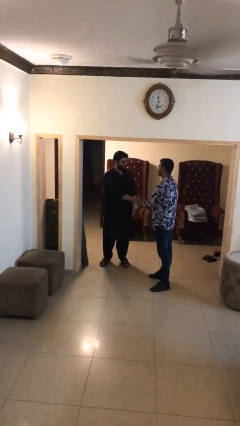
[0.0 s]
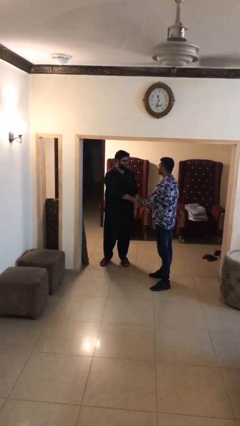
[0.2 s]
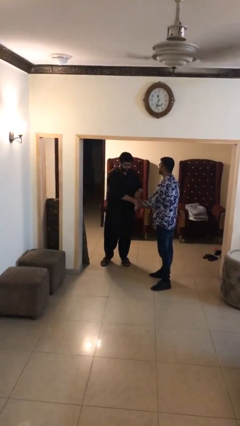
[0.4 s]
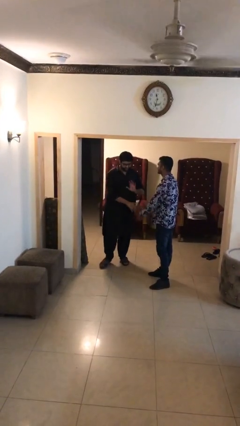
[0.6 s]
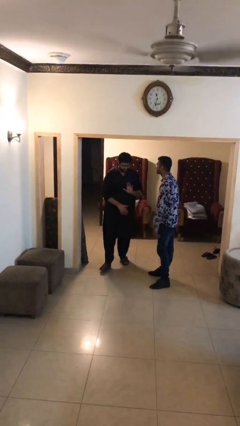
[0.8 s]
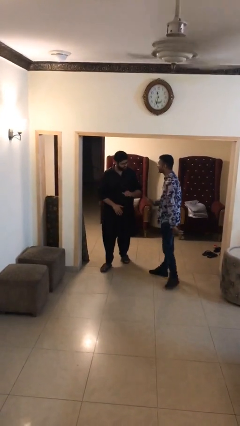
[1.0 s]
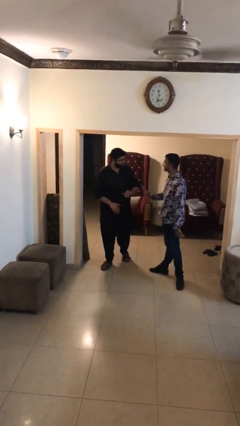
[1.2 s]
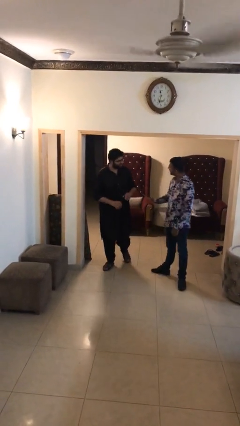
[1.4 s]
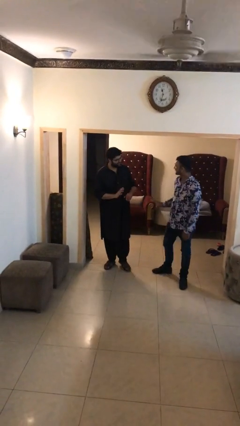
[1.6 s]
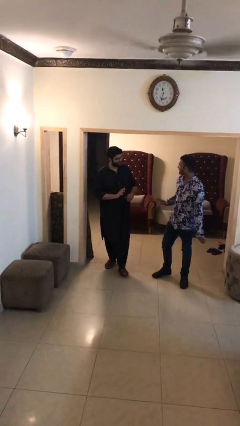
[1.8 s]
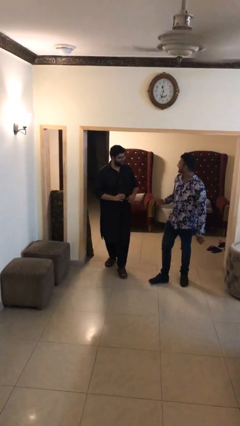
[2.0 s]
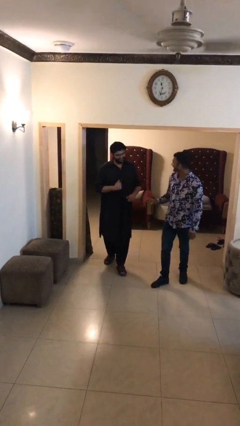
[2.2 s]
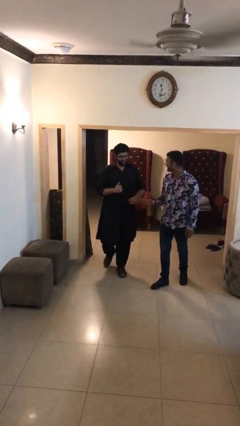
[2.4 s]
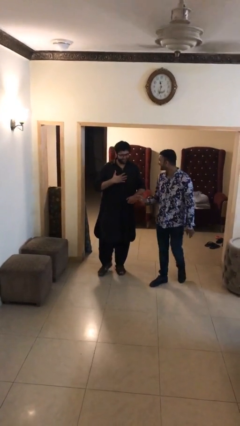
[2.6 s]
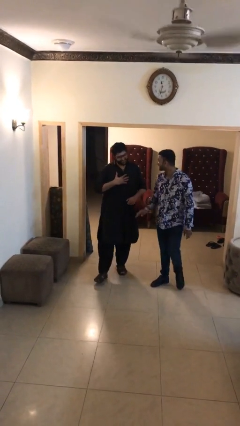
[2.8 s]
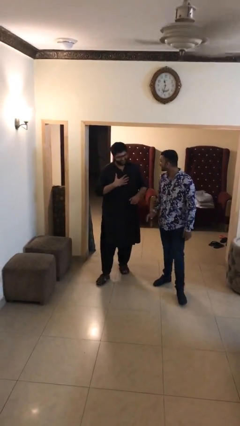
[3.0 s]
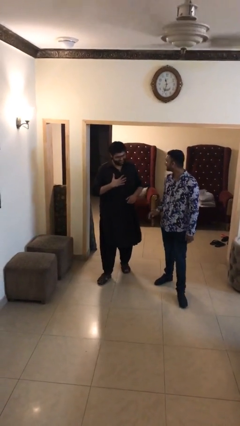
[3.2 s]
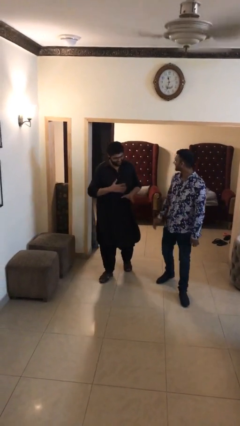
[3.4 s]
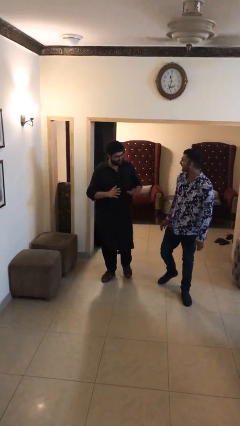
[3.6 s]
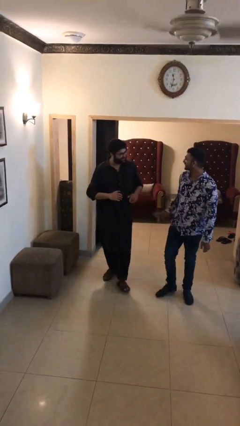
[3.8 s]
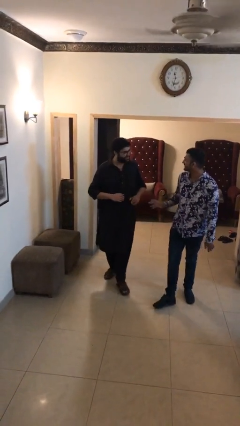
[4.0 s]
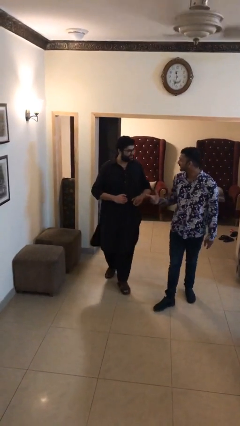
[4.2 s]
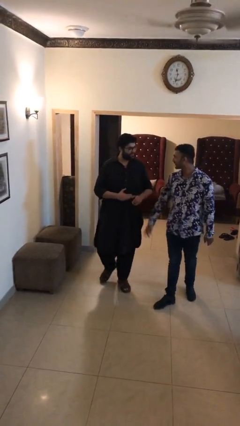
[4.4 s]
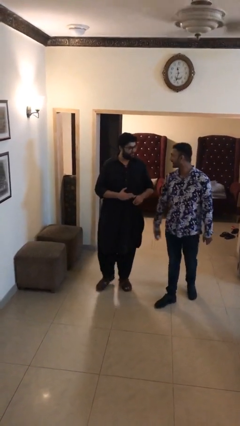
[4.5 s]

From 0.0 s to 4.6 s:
person talks to person

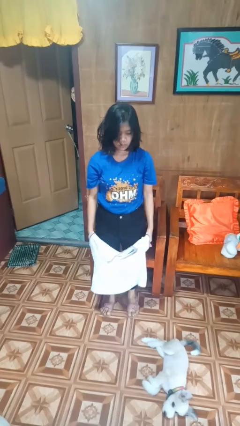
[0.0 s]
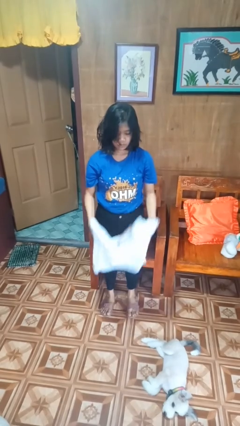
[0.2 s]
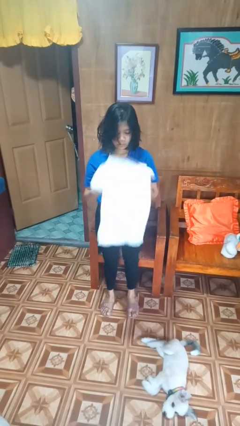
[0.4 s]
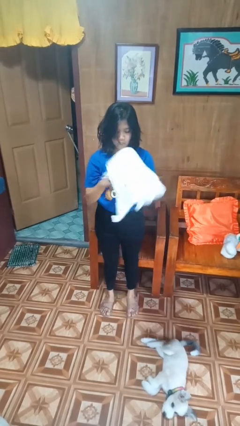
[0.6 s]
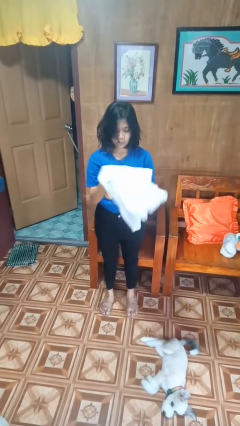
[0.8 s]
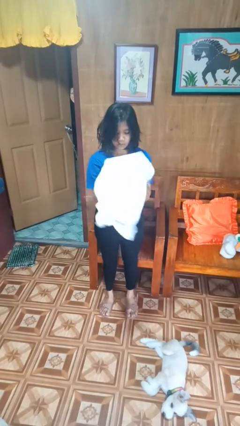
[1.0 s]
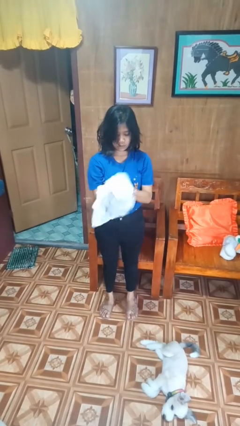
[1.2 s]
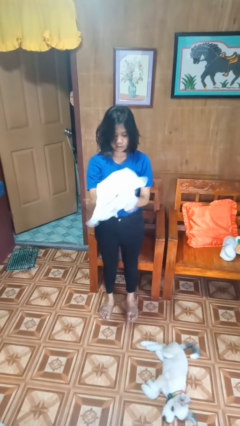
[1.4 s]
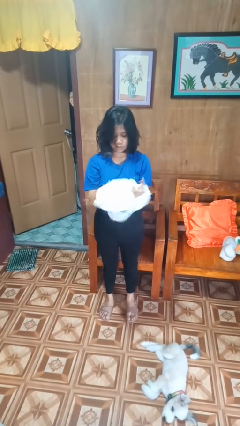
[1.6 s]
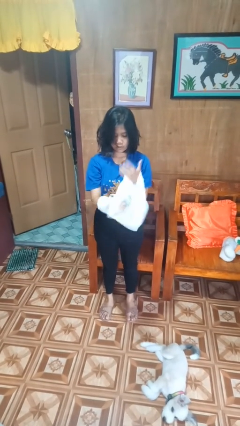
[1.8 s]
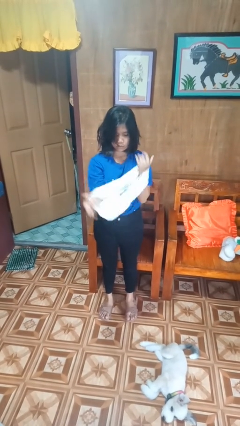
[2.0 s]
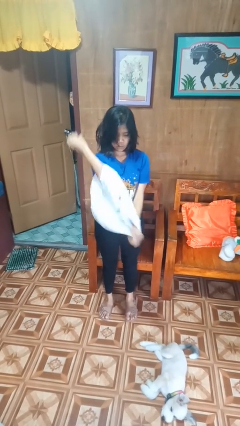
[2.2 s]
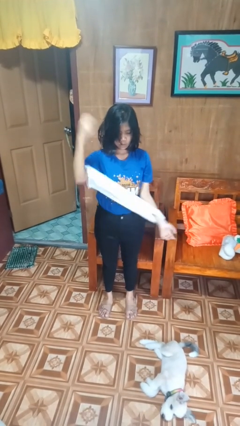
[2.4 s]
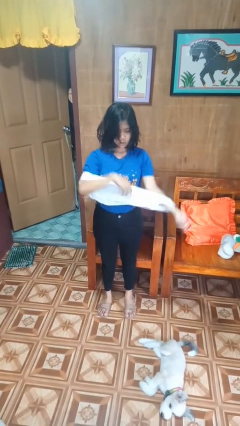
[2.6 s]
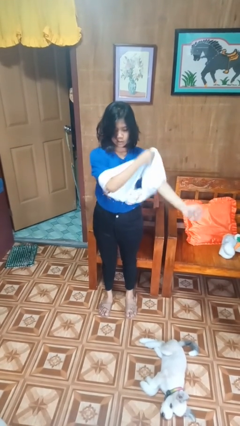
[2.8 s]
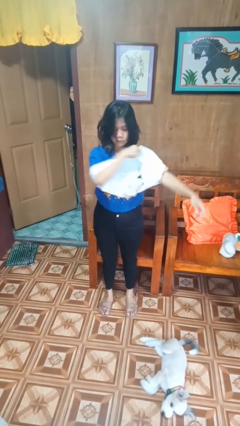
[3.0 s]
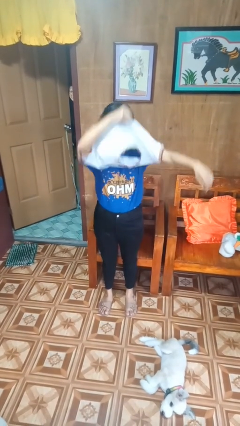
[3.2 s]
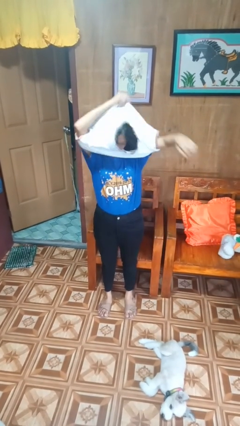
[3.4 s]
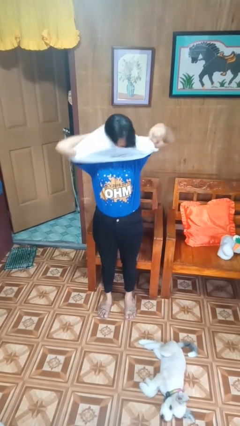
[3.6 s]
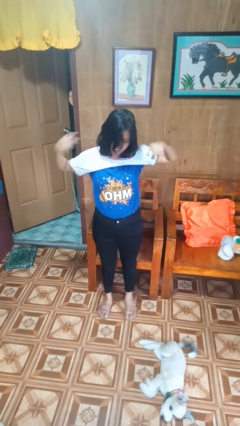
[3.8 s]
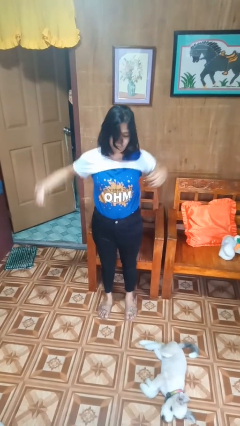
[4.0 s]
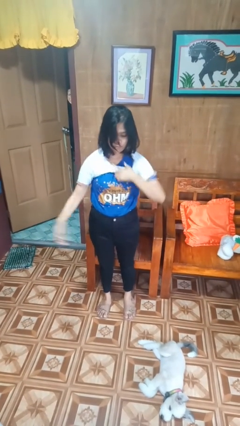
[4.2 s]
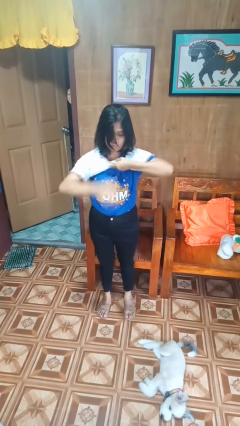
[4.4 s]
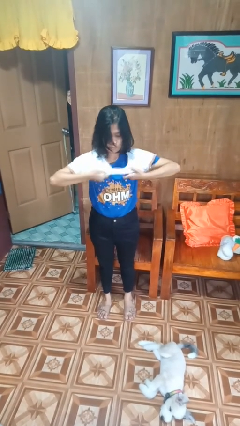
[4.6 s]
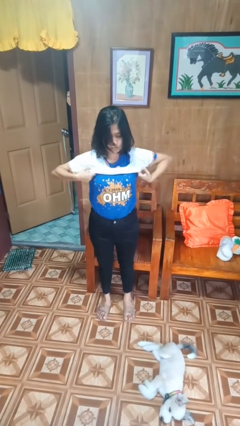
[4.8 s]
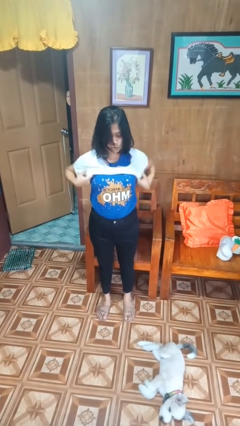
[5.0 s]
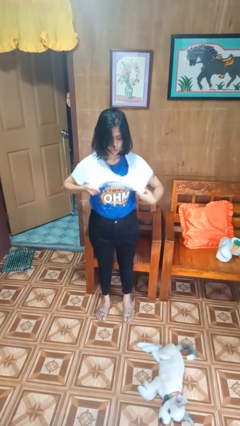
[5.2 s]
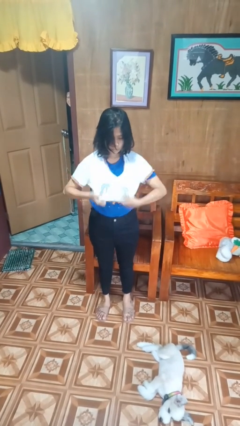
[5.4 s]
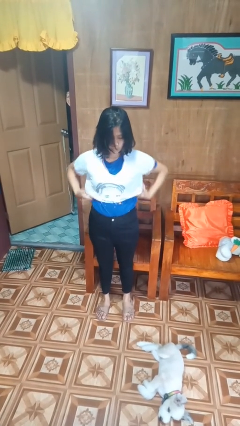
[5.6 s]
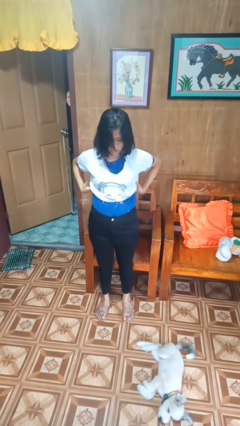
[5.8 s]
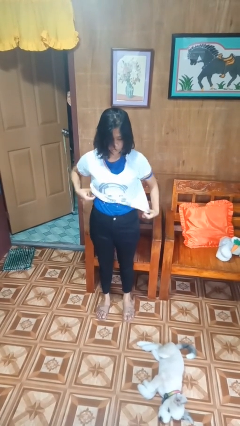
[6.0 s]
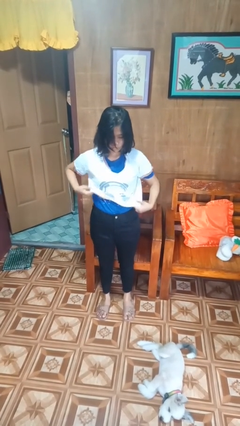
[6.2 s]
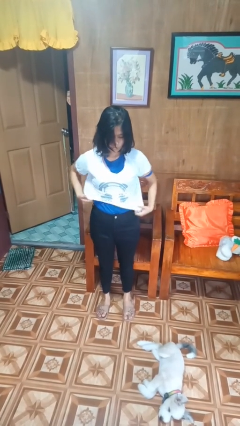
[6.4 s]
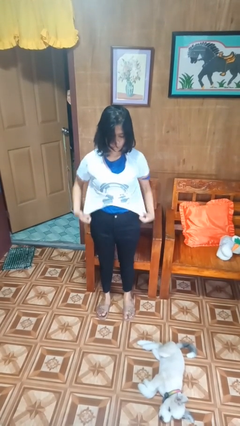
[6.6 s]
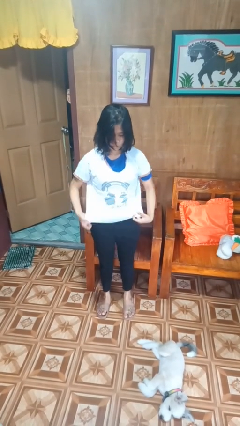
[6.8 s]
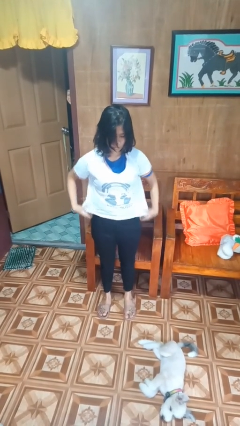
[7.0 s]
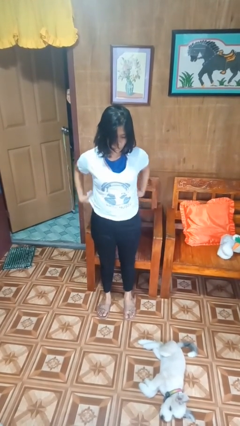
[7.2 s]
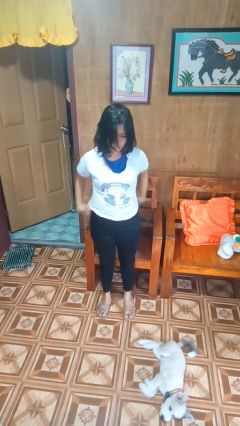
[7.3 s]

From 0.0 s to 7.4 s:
person puts on shirt

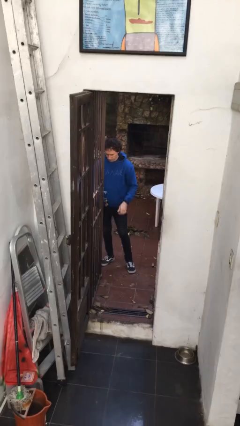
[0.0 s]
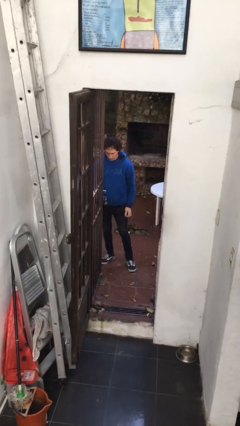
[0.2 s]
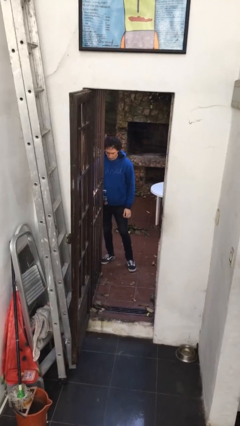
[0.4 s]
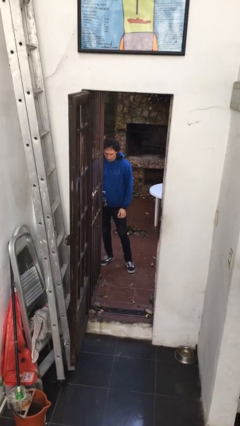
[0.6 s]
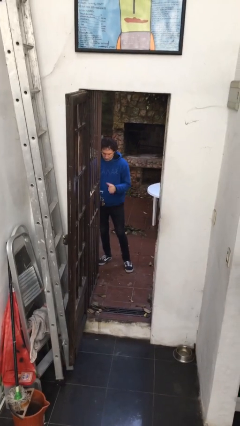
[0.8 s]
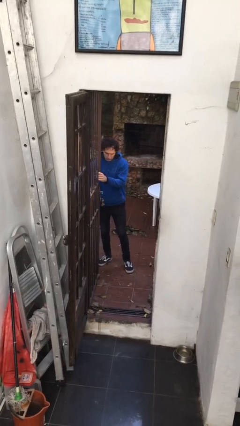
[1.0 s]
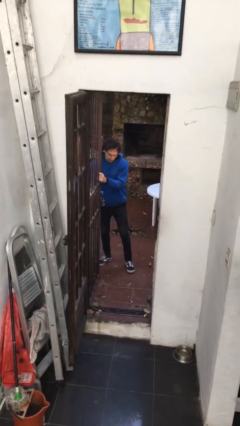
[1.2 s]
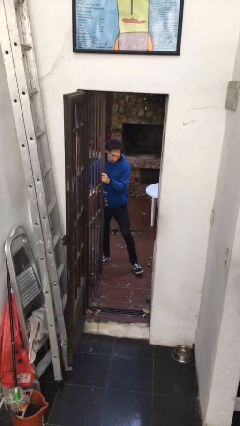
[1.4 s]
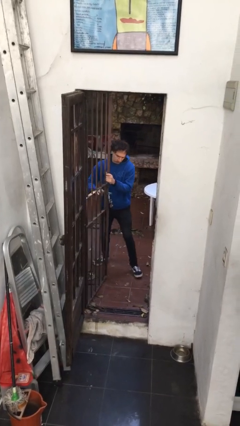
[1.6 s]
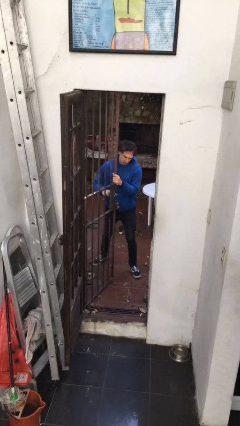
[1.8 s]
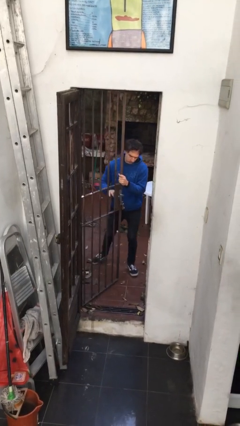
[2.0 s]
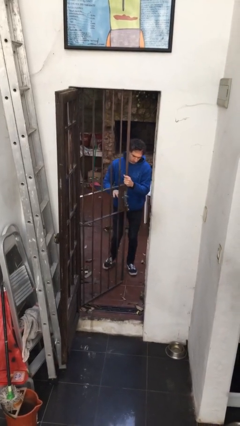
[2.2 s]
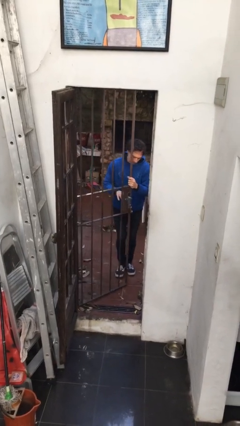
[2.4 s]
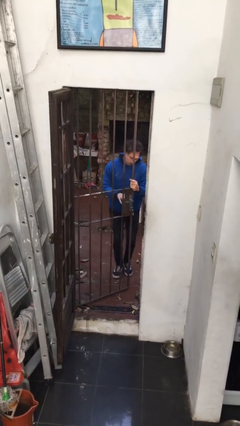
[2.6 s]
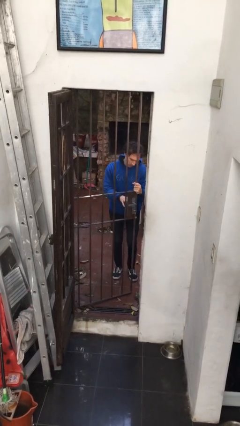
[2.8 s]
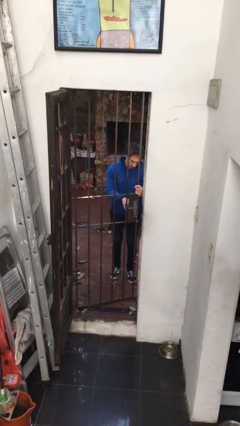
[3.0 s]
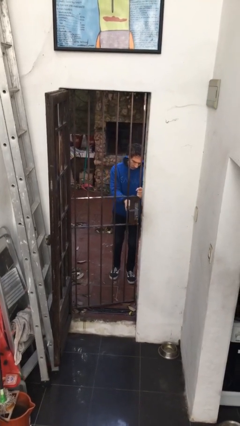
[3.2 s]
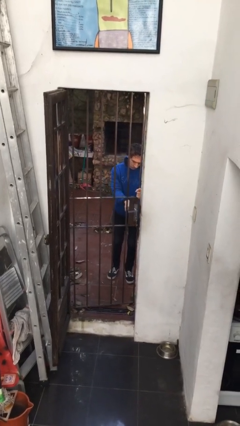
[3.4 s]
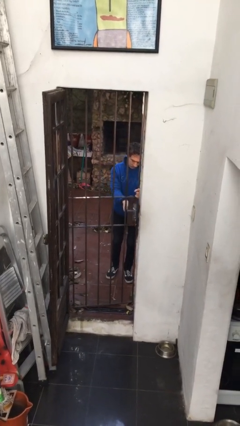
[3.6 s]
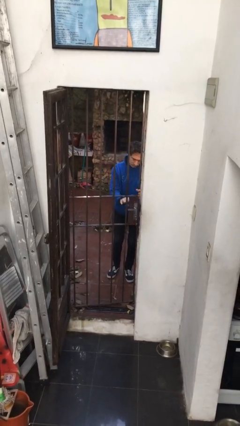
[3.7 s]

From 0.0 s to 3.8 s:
person closes gate

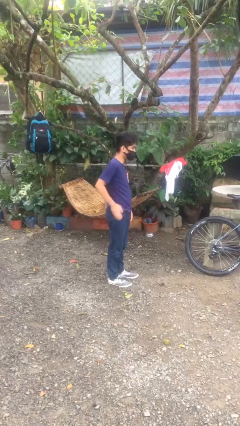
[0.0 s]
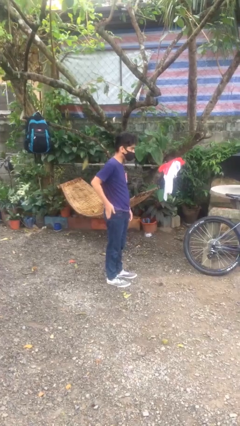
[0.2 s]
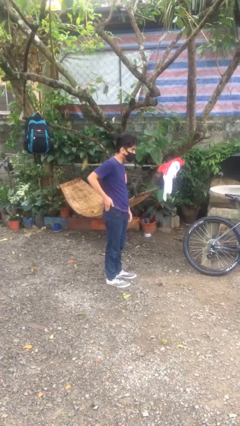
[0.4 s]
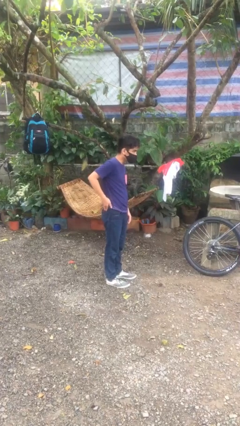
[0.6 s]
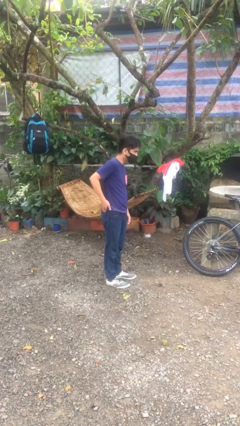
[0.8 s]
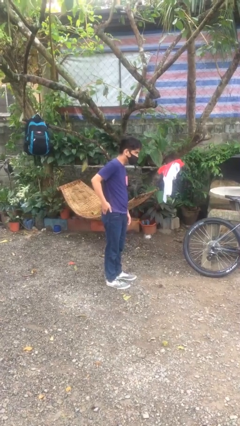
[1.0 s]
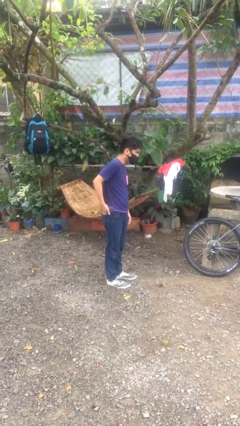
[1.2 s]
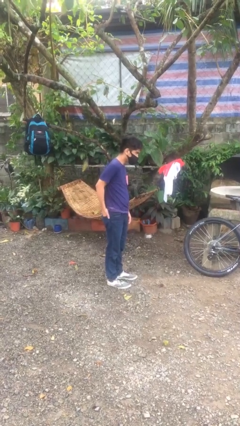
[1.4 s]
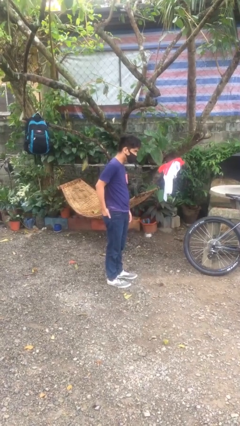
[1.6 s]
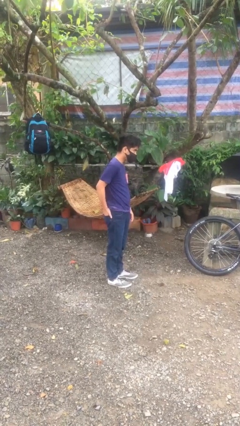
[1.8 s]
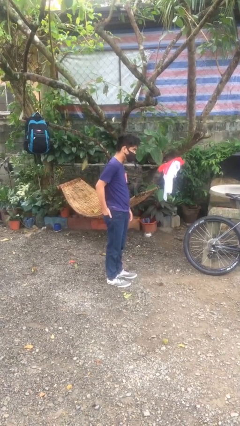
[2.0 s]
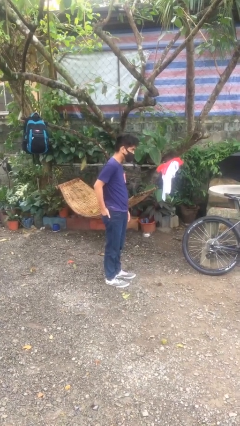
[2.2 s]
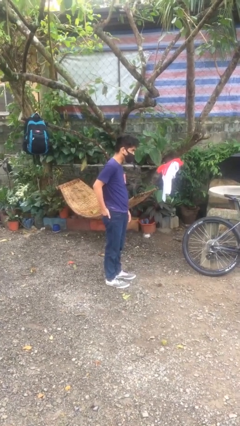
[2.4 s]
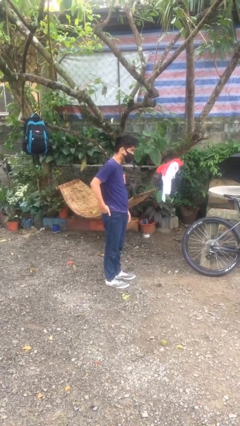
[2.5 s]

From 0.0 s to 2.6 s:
person puts hands in back pockets
